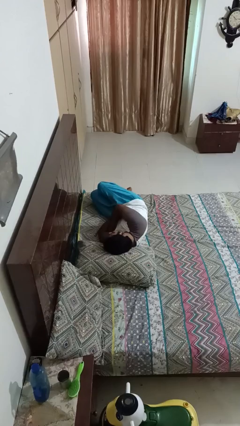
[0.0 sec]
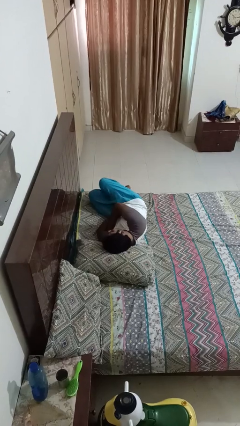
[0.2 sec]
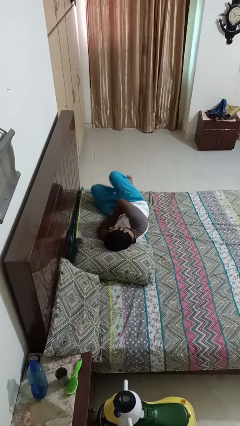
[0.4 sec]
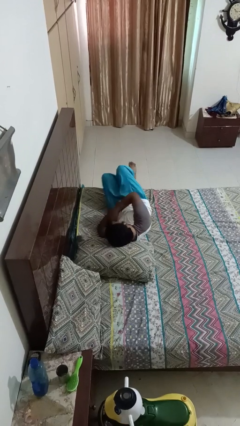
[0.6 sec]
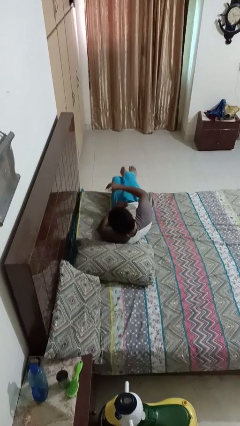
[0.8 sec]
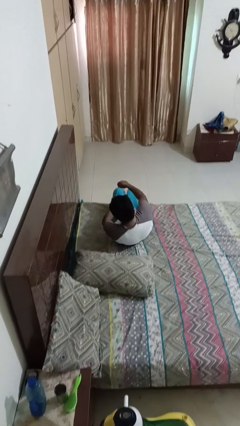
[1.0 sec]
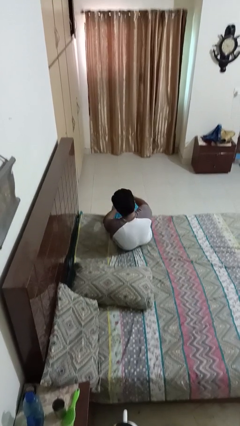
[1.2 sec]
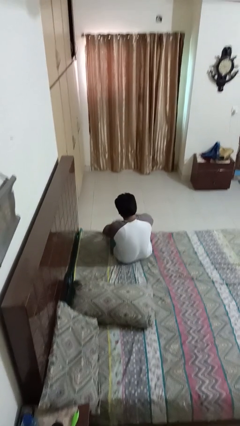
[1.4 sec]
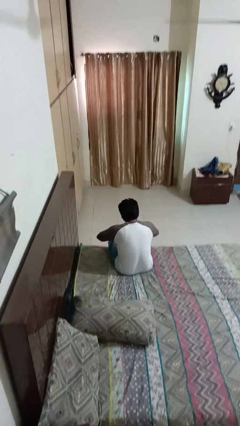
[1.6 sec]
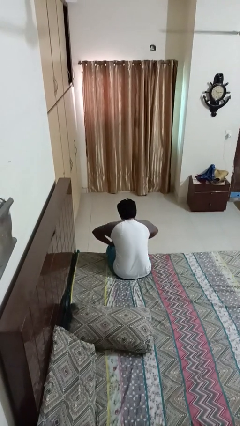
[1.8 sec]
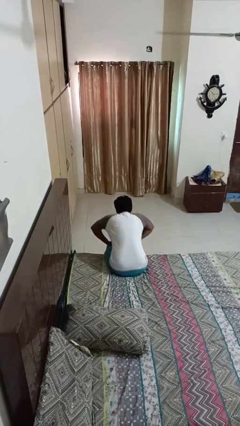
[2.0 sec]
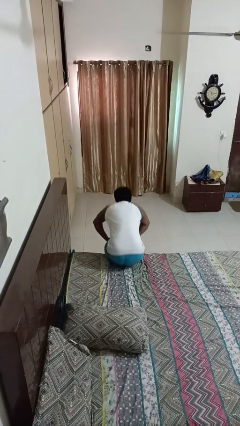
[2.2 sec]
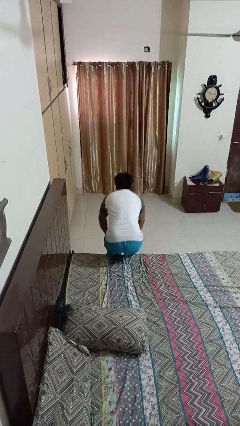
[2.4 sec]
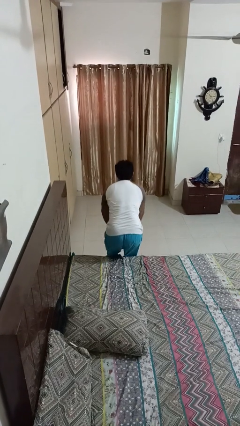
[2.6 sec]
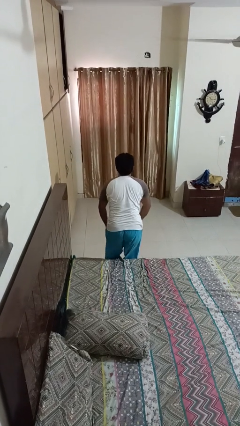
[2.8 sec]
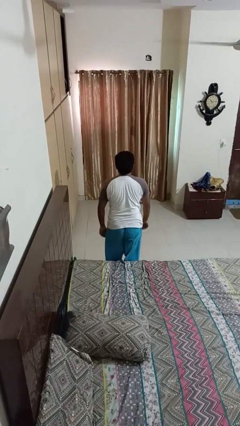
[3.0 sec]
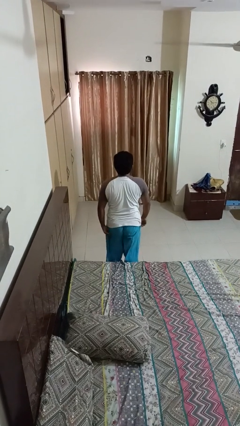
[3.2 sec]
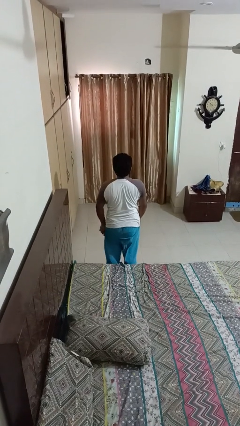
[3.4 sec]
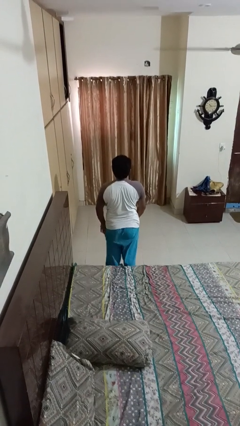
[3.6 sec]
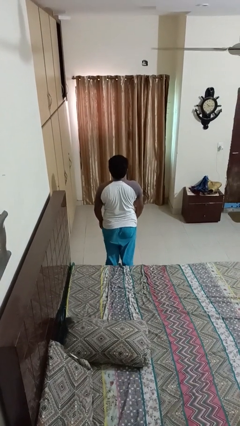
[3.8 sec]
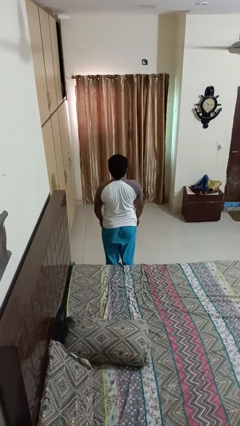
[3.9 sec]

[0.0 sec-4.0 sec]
person stands up

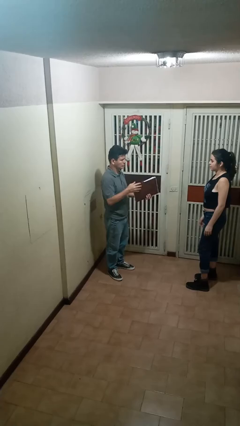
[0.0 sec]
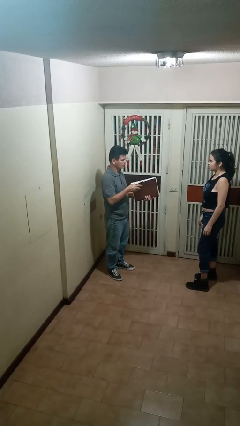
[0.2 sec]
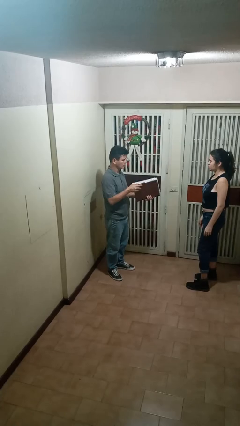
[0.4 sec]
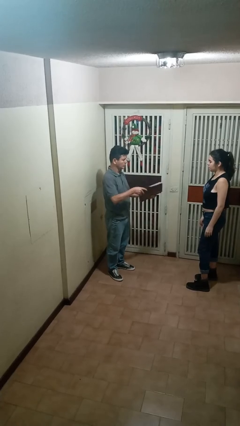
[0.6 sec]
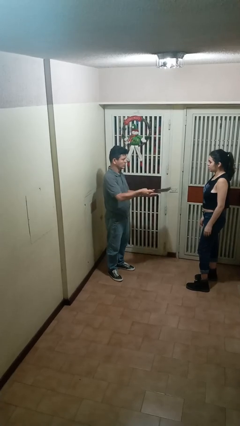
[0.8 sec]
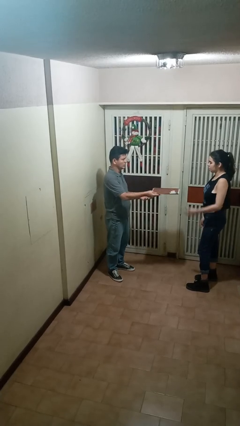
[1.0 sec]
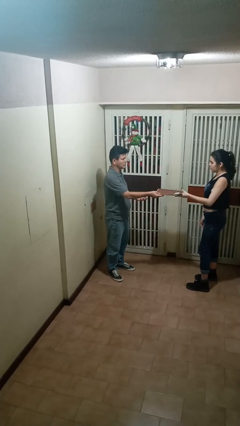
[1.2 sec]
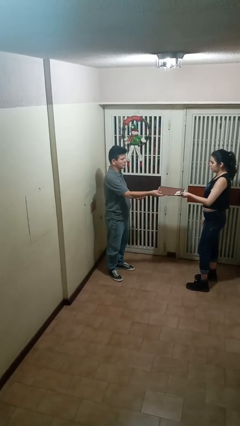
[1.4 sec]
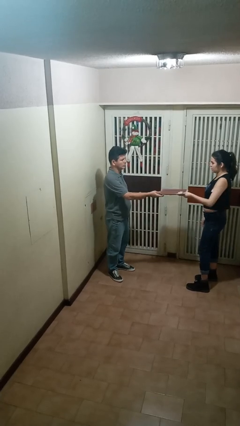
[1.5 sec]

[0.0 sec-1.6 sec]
person transfers object to person

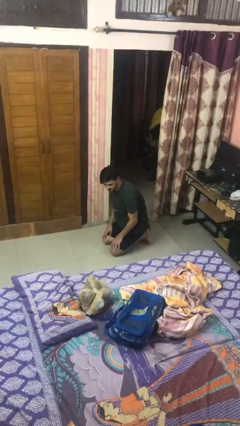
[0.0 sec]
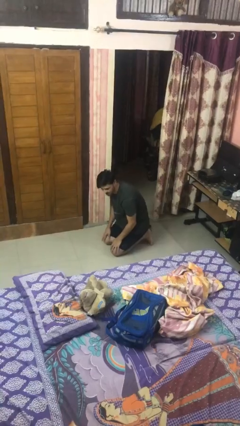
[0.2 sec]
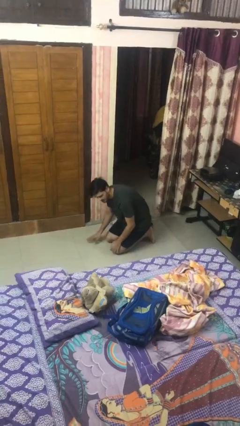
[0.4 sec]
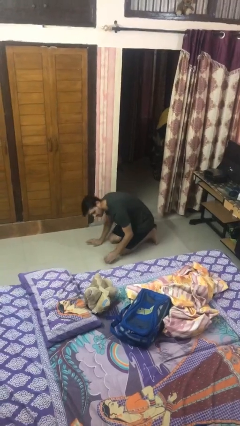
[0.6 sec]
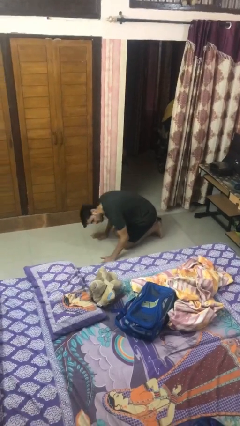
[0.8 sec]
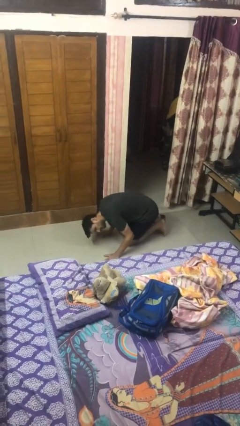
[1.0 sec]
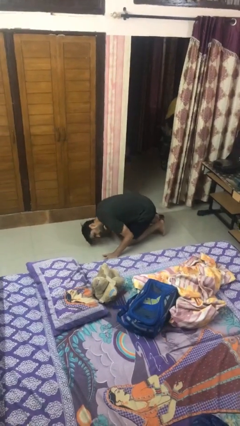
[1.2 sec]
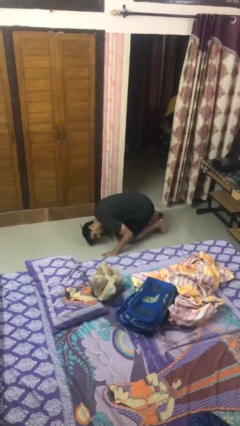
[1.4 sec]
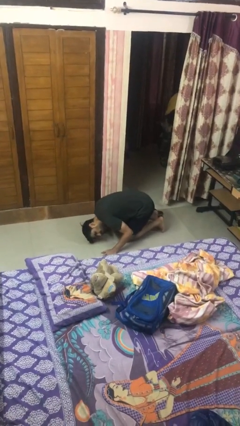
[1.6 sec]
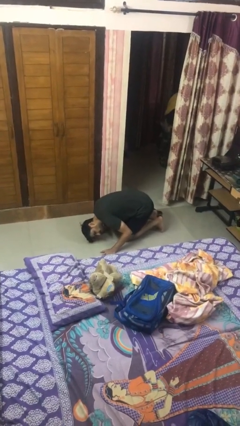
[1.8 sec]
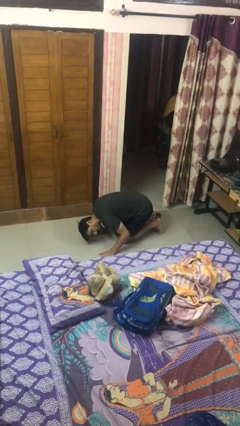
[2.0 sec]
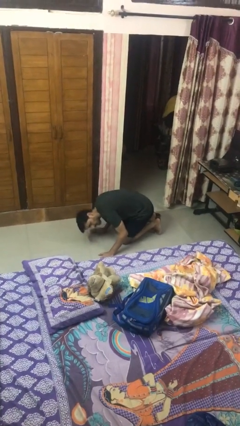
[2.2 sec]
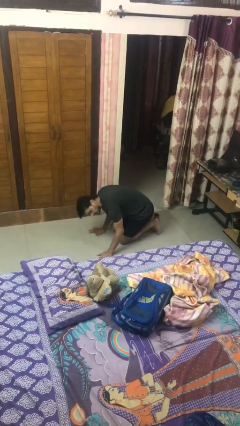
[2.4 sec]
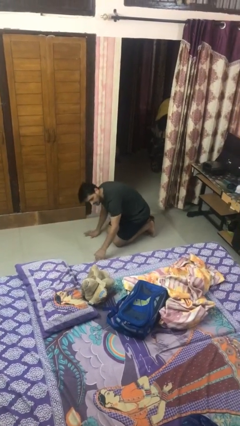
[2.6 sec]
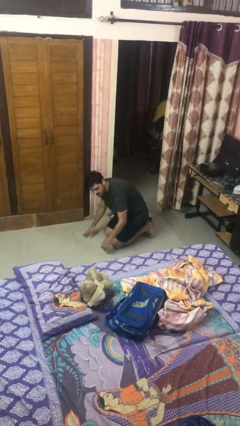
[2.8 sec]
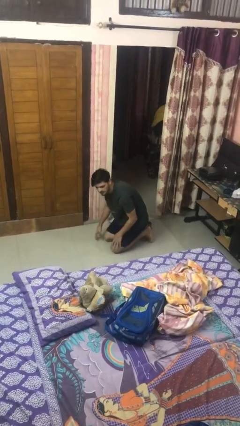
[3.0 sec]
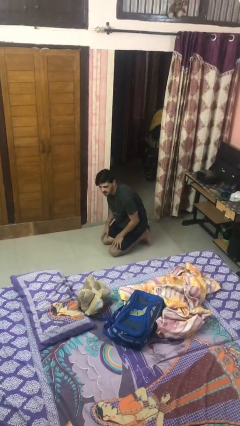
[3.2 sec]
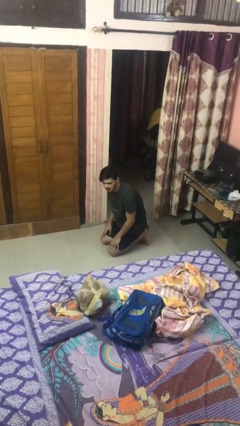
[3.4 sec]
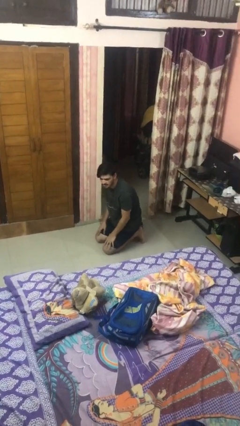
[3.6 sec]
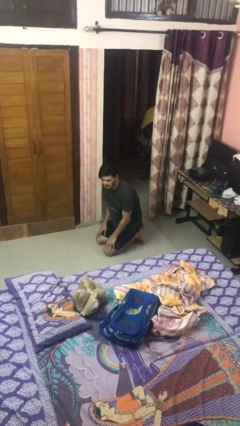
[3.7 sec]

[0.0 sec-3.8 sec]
person searches under bed

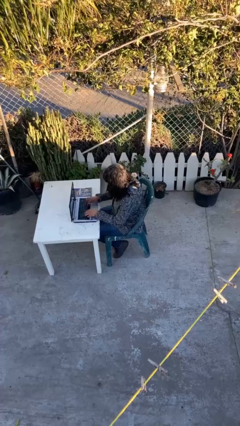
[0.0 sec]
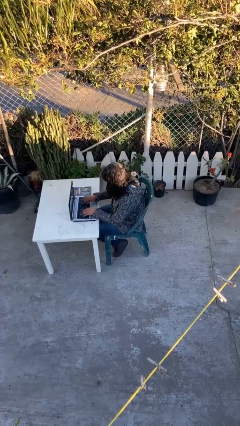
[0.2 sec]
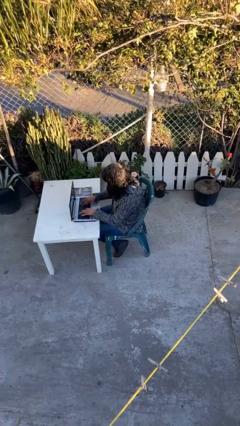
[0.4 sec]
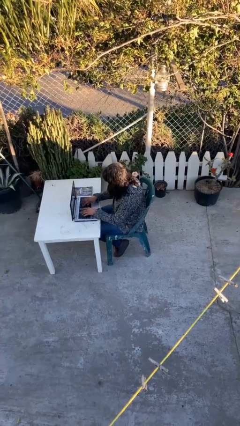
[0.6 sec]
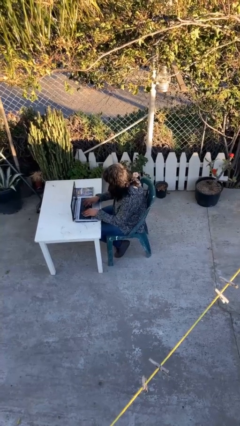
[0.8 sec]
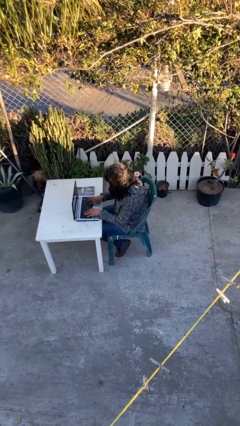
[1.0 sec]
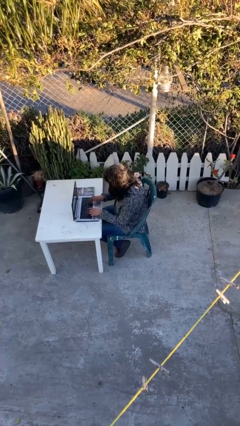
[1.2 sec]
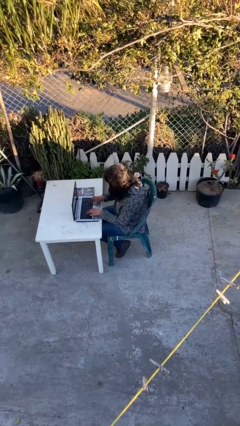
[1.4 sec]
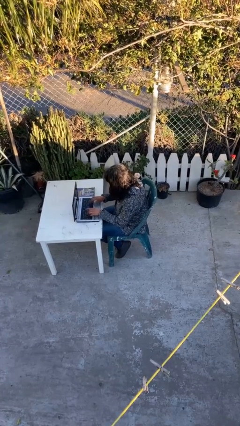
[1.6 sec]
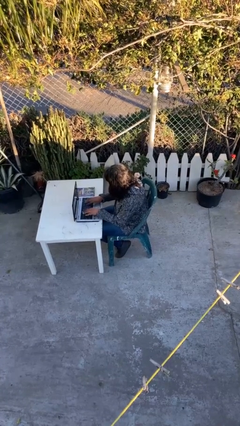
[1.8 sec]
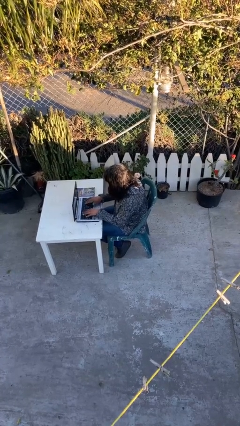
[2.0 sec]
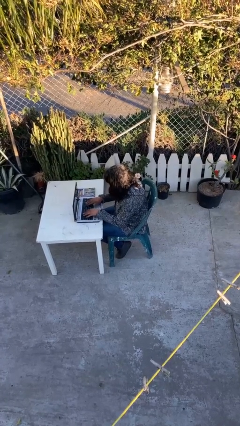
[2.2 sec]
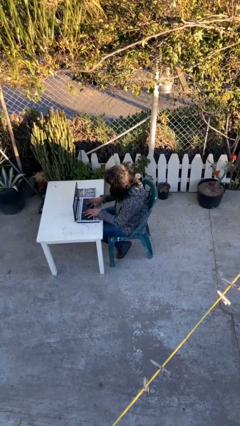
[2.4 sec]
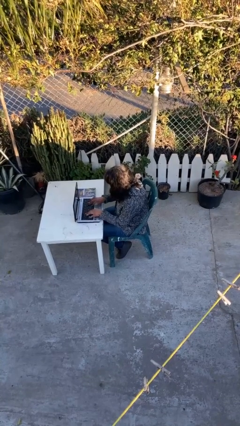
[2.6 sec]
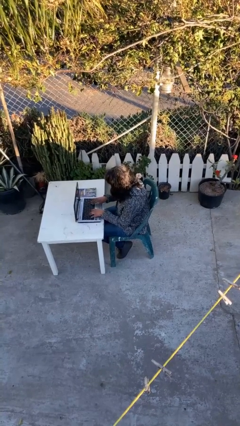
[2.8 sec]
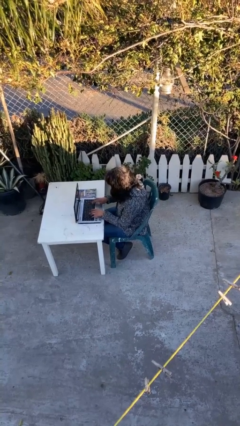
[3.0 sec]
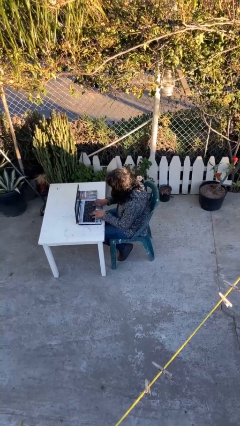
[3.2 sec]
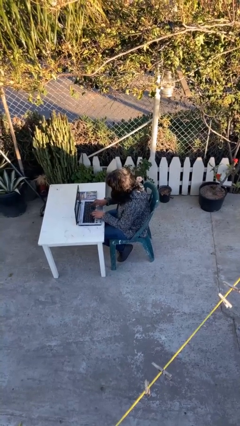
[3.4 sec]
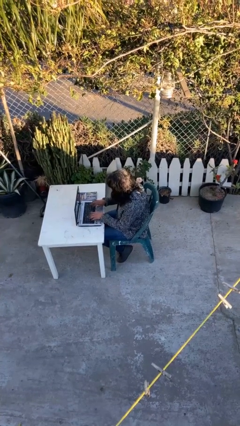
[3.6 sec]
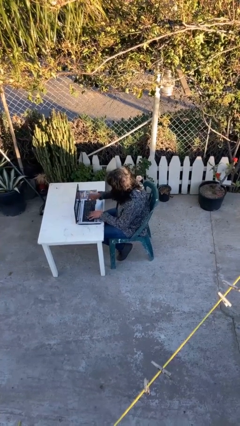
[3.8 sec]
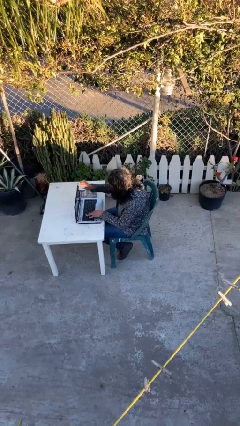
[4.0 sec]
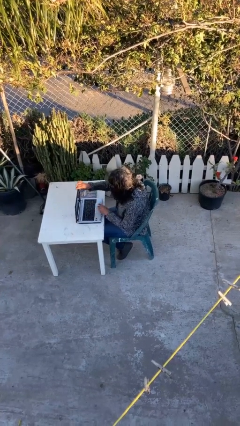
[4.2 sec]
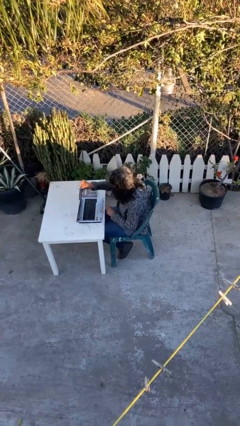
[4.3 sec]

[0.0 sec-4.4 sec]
person interacts with laptop

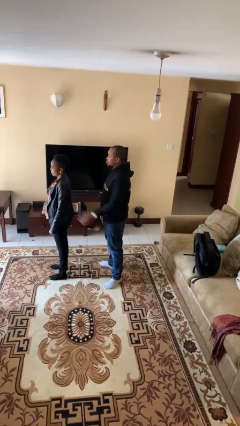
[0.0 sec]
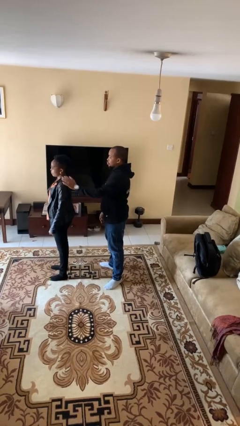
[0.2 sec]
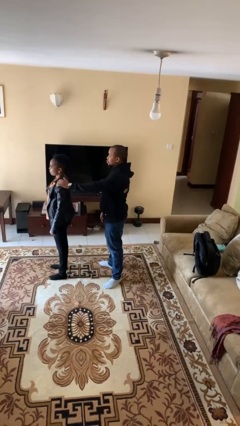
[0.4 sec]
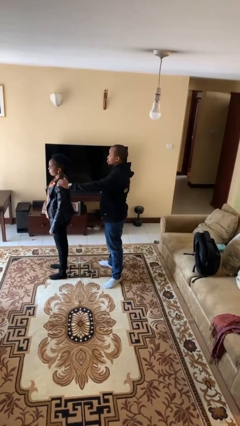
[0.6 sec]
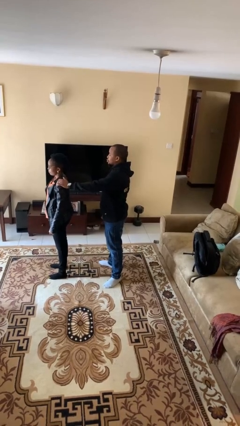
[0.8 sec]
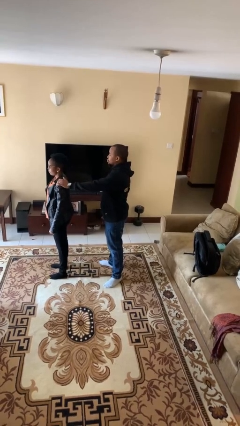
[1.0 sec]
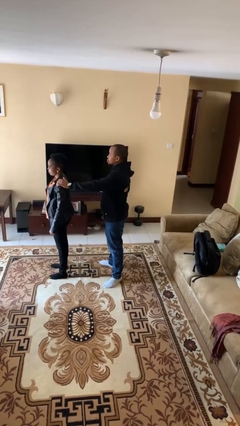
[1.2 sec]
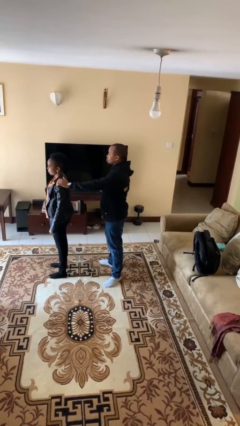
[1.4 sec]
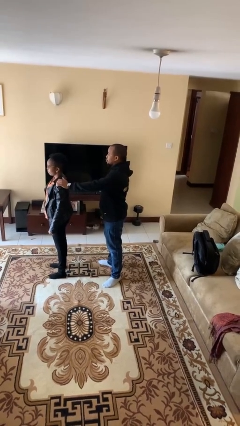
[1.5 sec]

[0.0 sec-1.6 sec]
person grabs person by shoulder

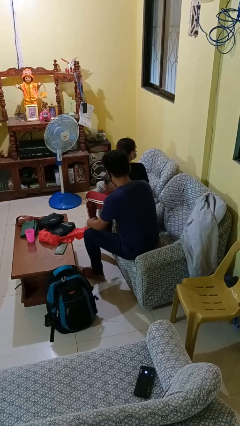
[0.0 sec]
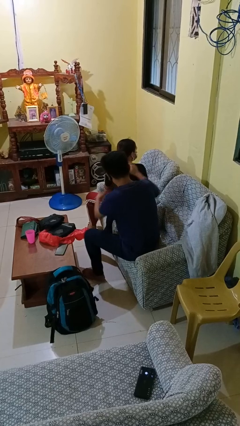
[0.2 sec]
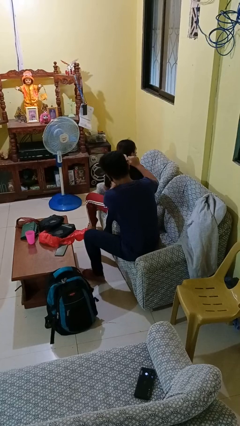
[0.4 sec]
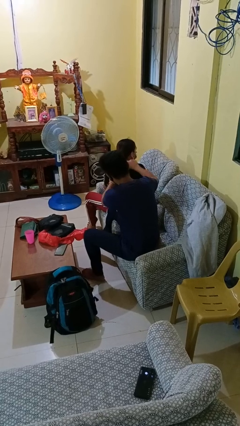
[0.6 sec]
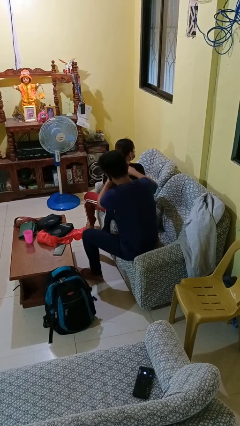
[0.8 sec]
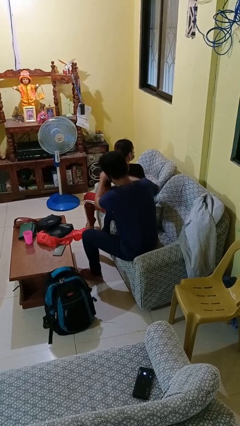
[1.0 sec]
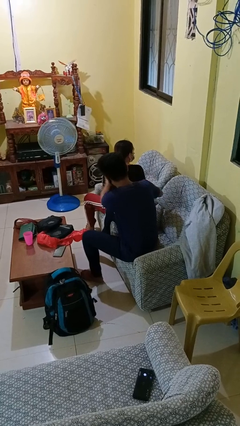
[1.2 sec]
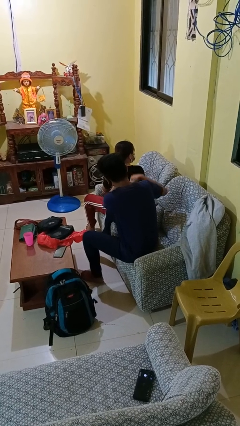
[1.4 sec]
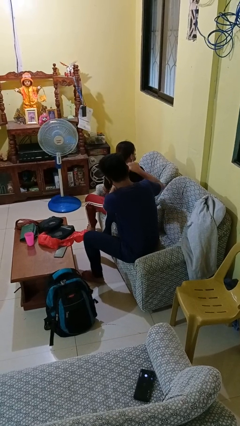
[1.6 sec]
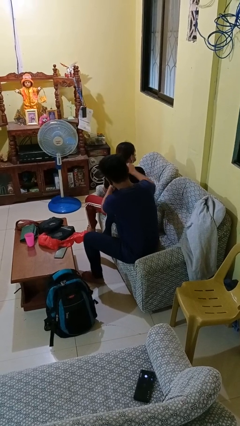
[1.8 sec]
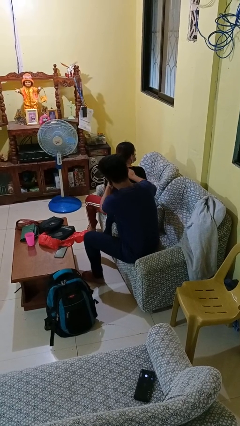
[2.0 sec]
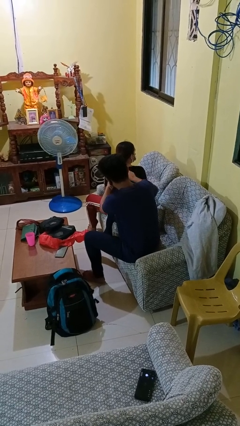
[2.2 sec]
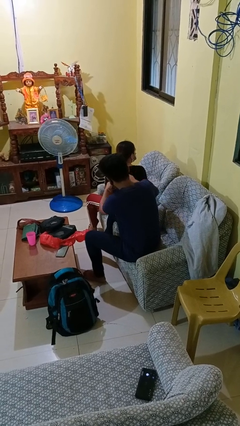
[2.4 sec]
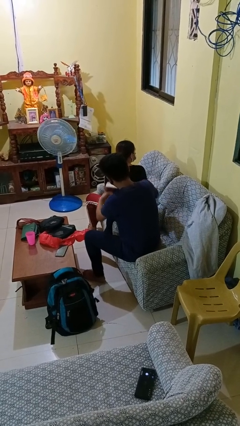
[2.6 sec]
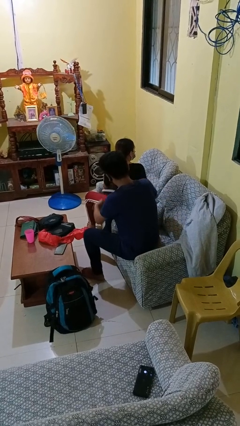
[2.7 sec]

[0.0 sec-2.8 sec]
person brushes hair of person
